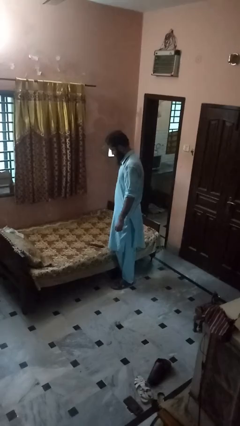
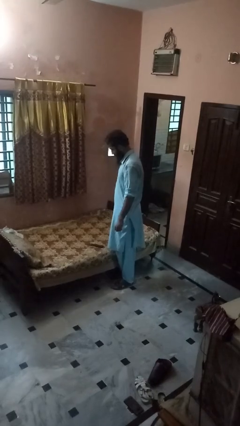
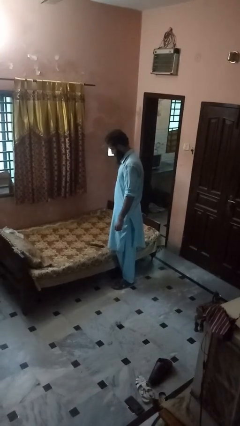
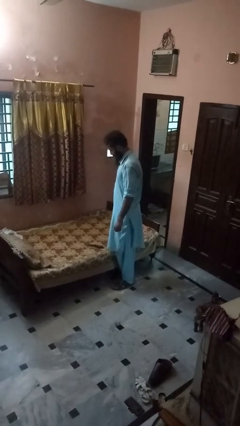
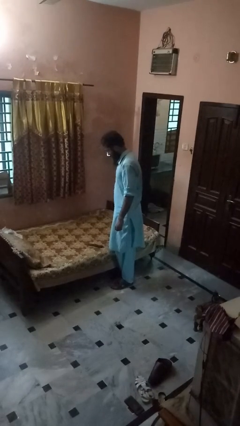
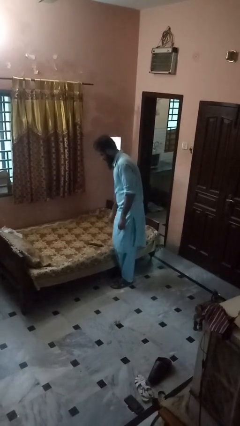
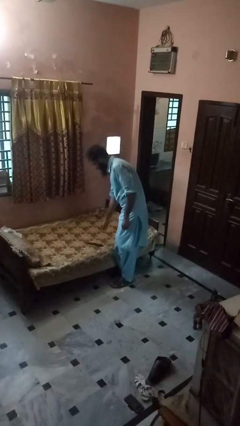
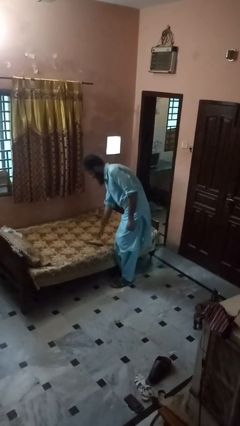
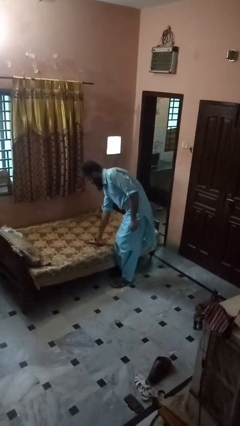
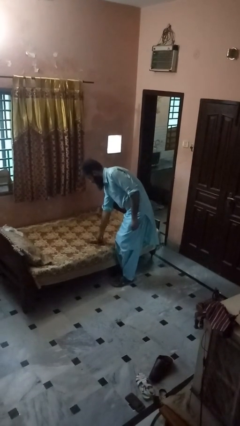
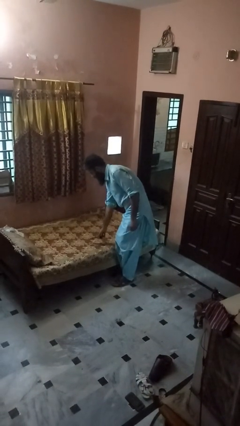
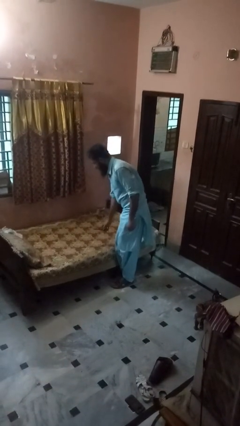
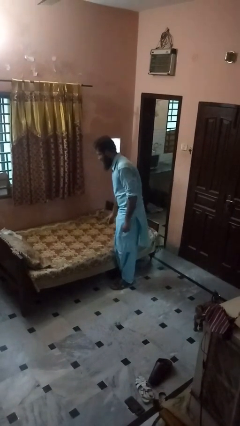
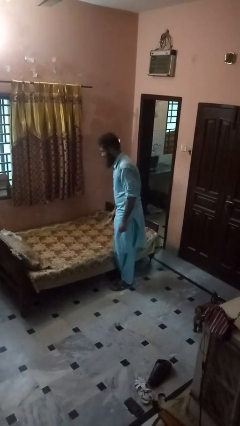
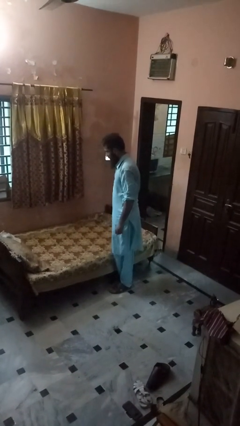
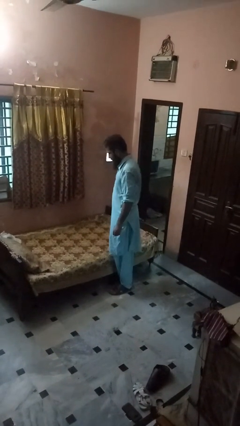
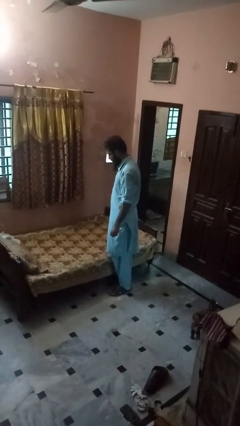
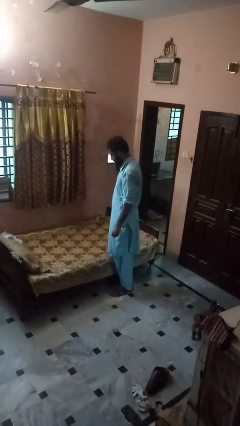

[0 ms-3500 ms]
person picks up object from bed

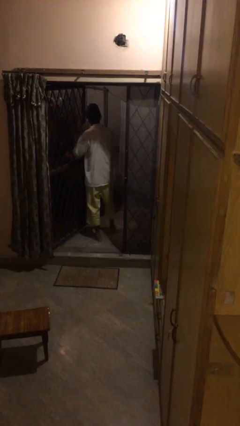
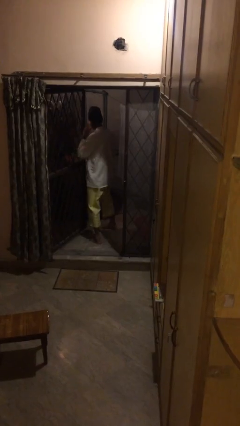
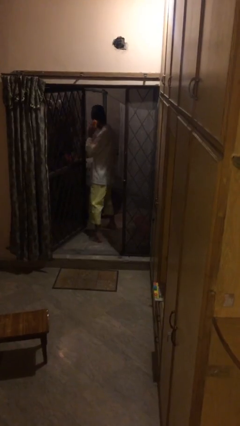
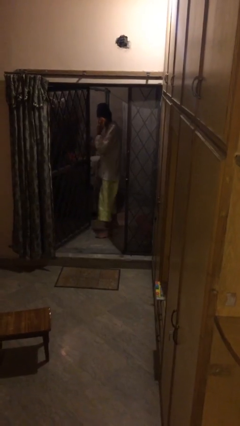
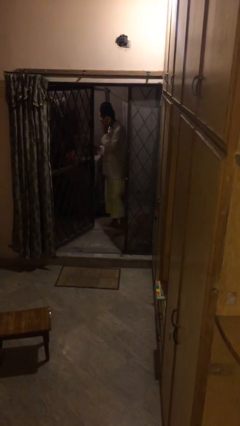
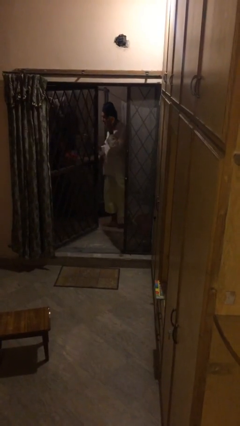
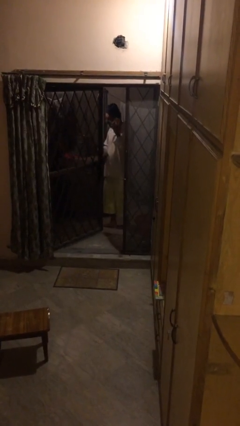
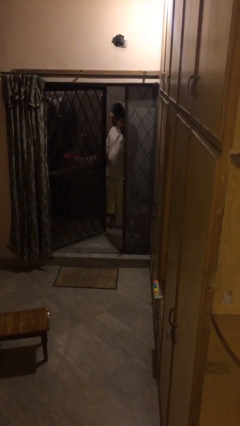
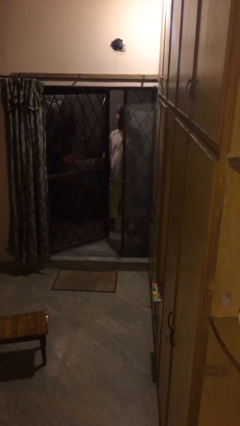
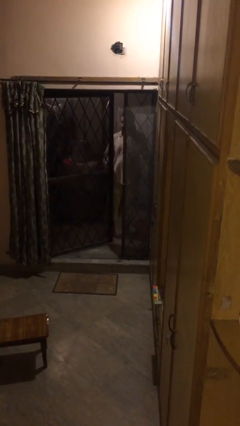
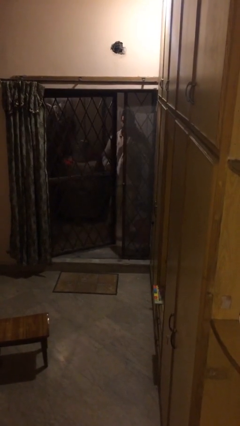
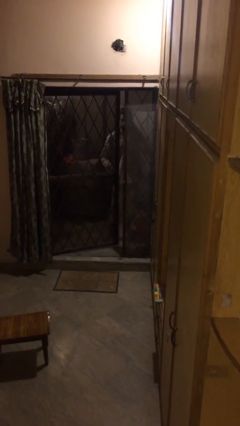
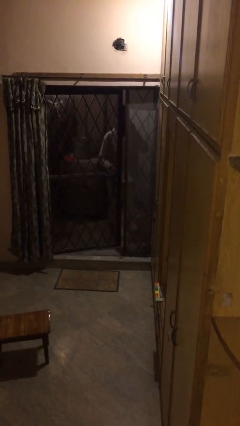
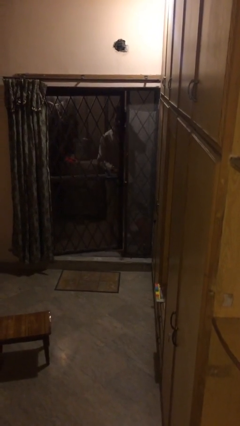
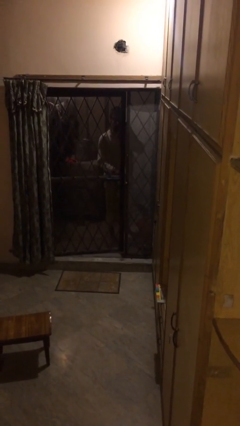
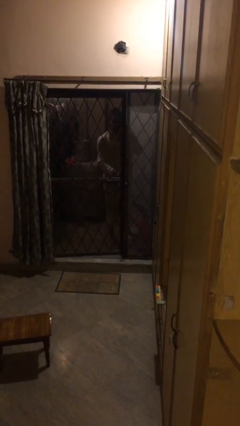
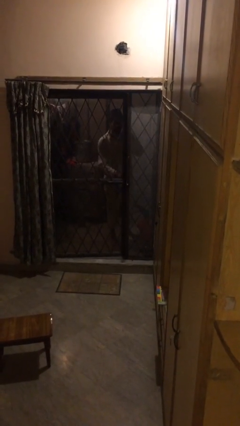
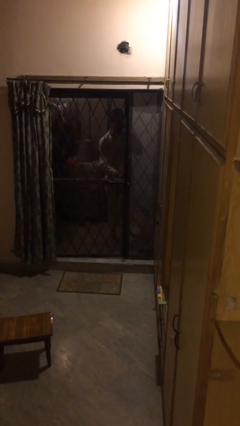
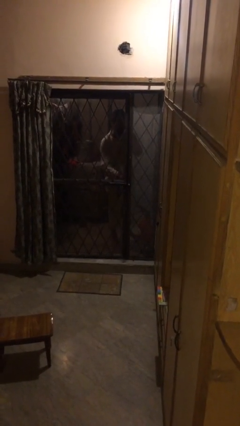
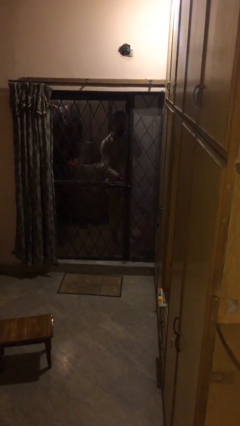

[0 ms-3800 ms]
person closes facility door

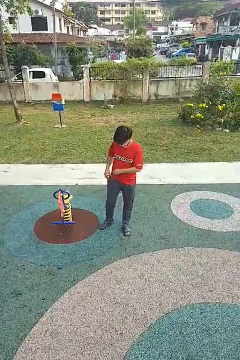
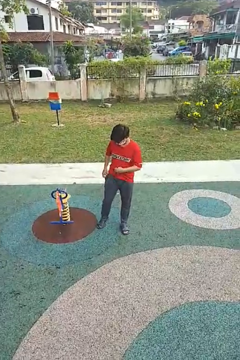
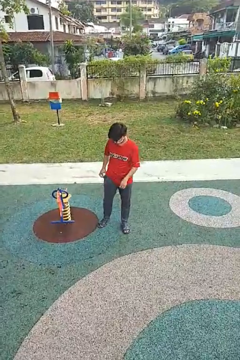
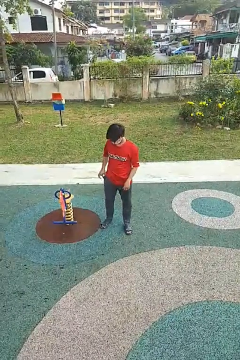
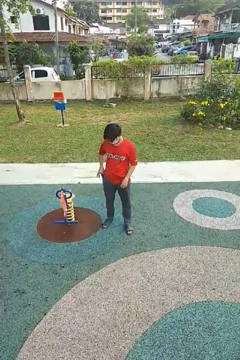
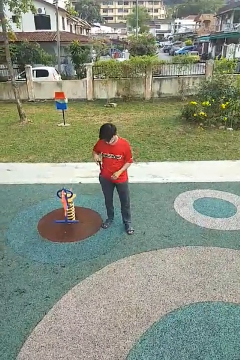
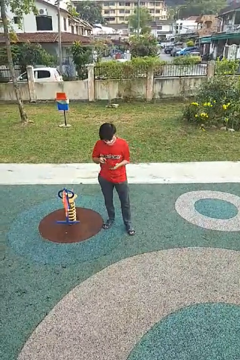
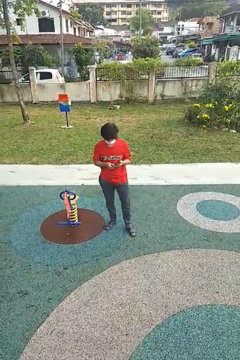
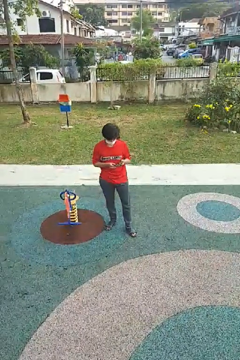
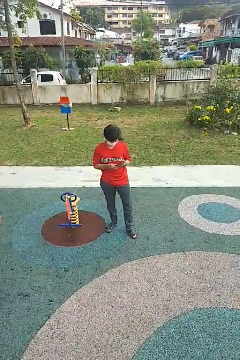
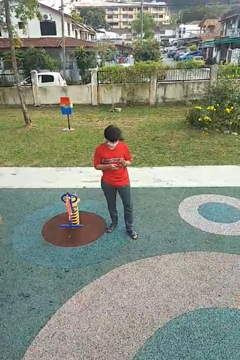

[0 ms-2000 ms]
person takes phone from pocket

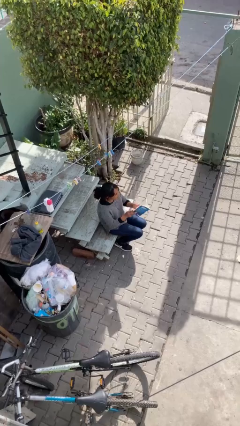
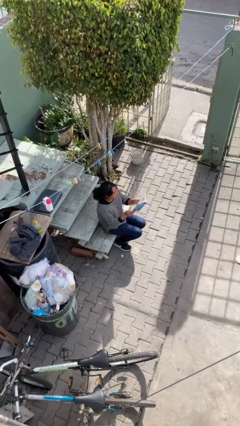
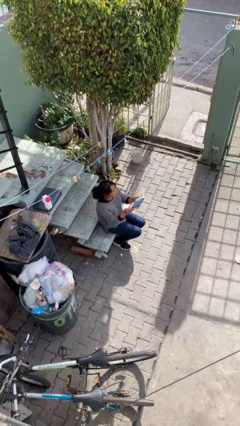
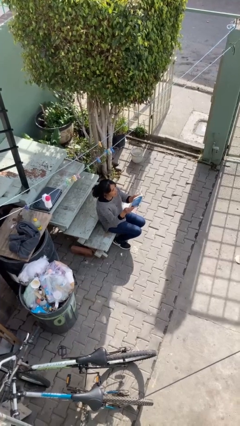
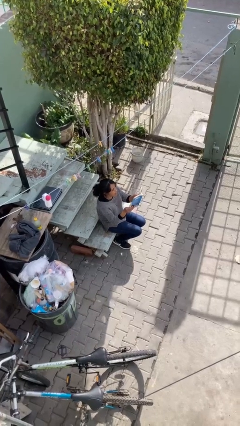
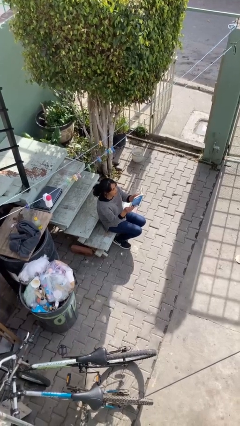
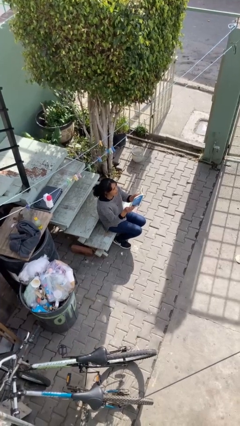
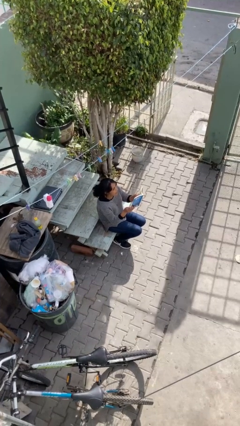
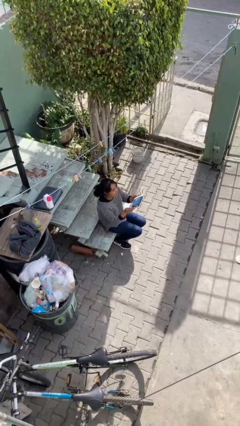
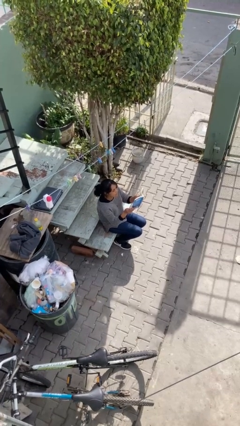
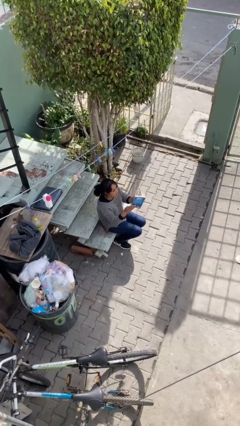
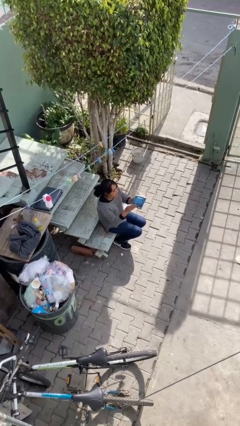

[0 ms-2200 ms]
person reads document

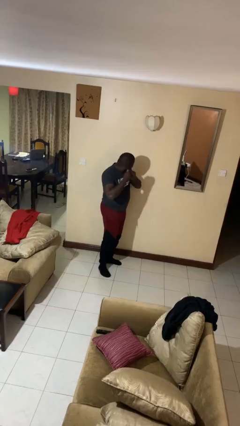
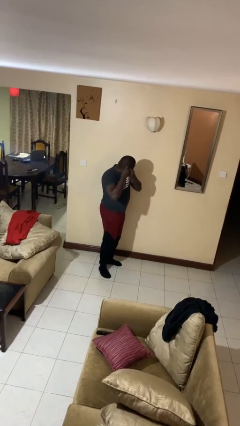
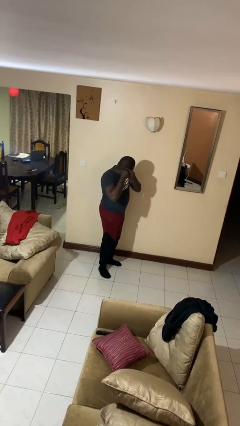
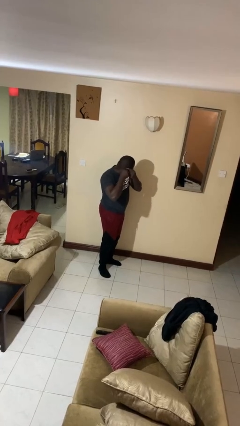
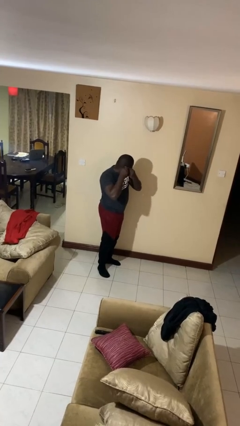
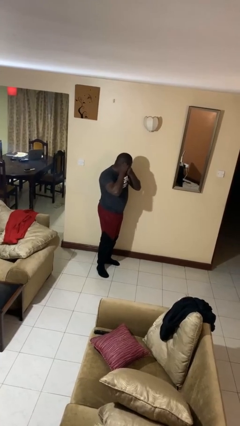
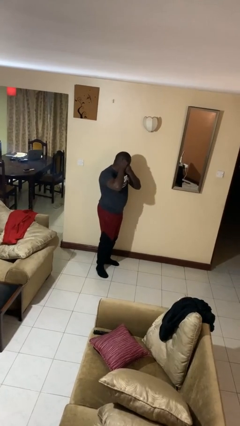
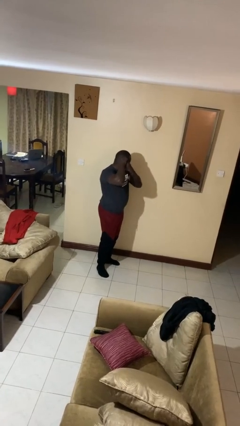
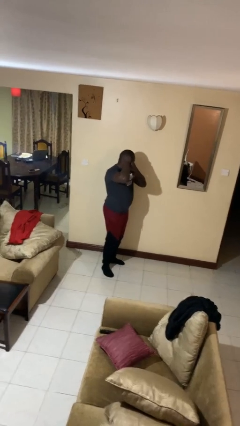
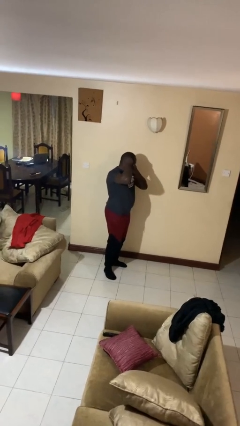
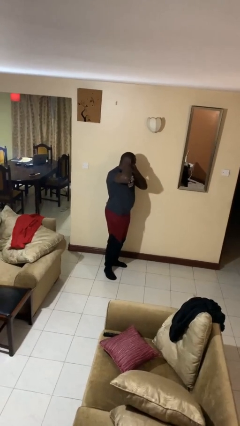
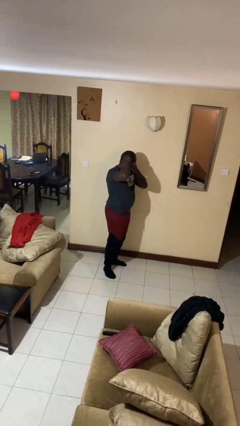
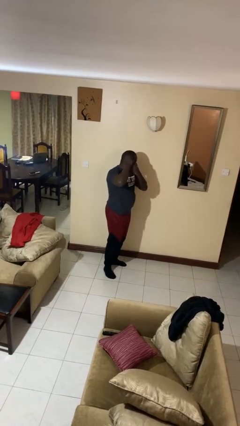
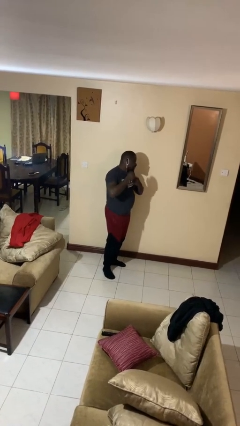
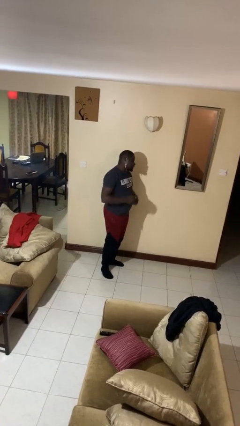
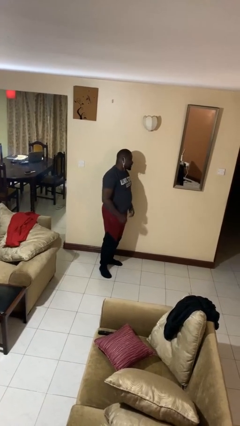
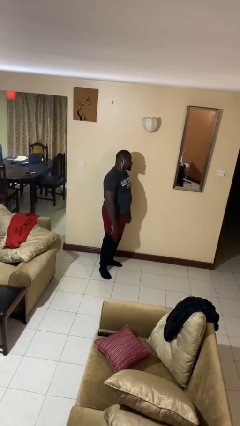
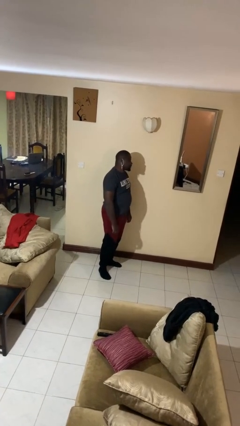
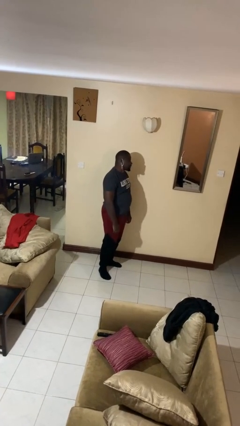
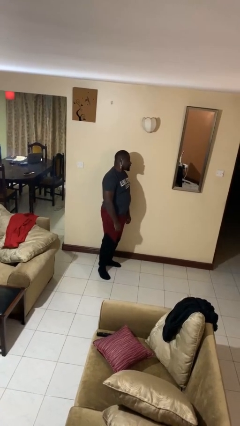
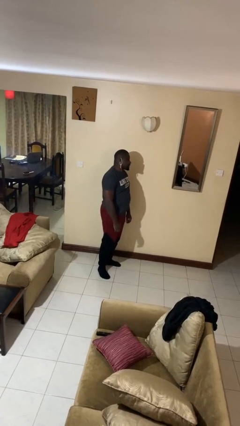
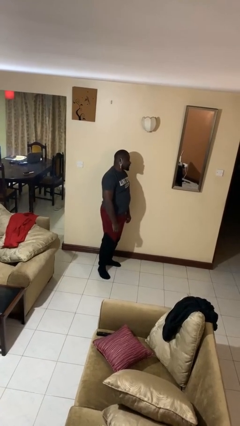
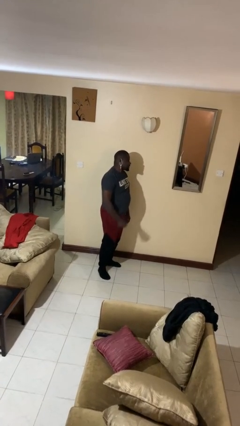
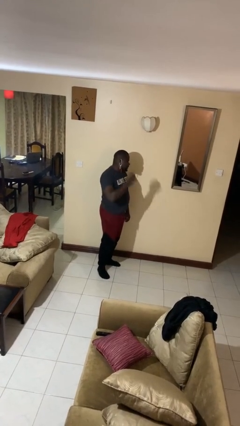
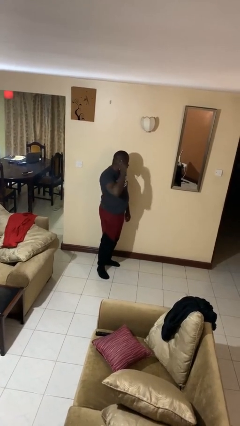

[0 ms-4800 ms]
person puts on earrings

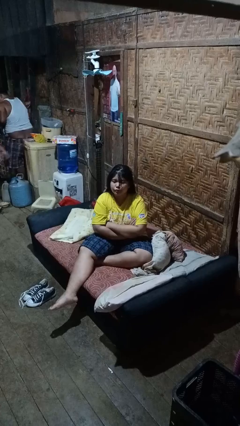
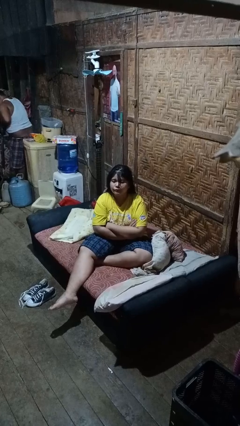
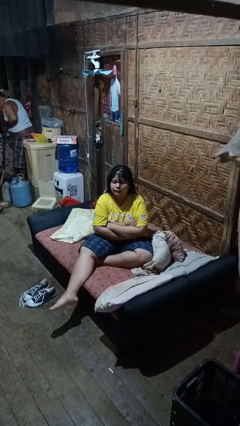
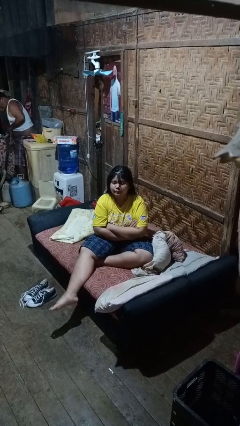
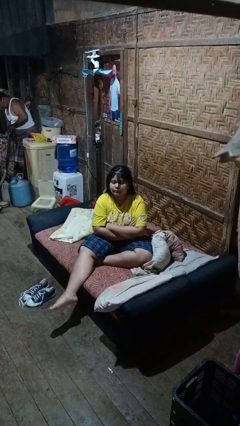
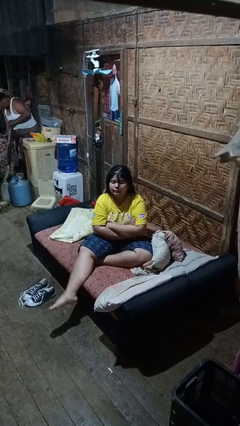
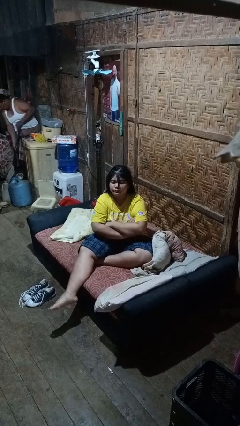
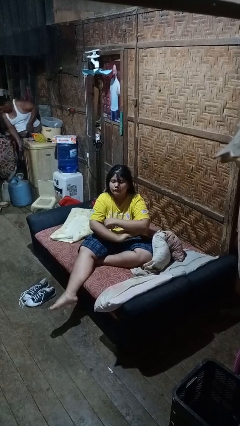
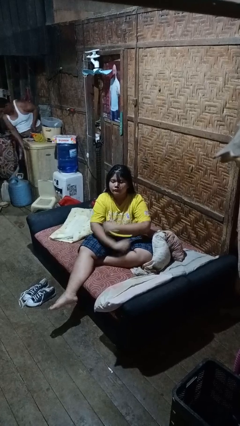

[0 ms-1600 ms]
person gestures arms x
